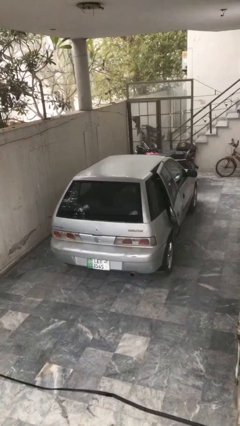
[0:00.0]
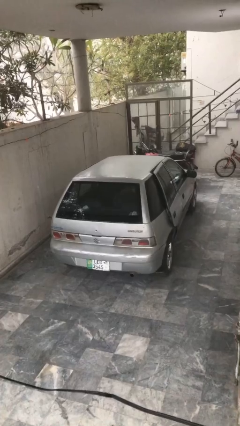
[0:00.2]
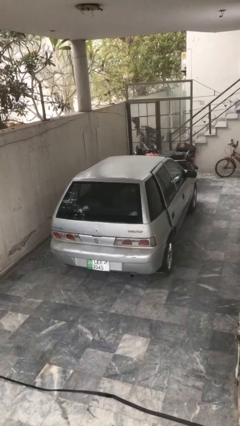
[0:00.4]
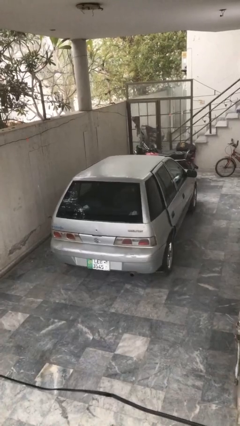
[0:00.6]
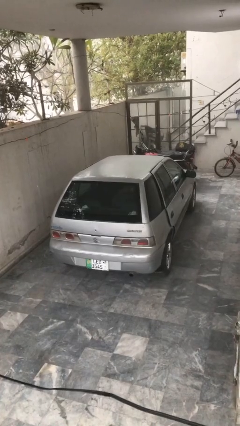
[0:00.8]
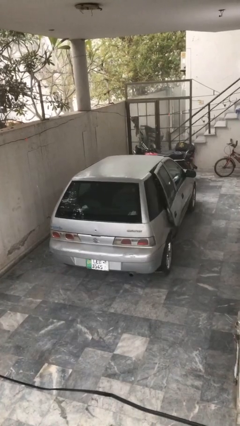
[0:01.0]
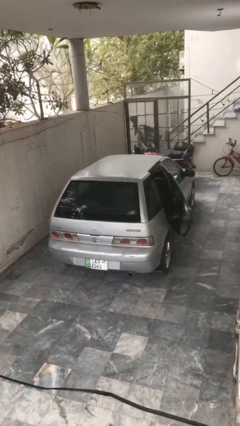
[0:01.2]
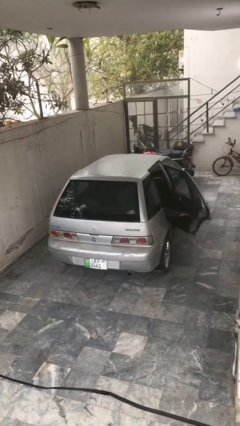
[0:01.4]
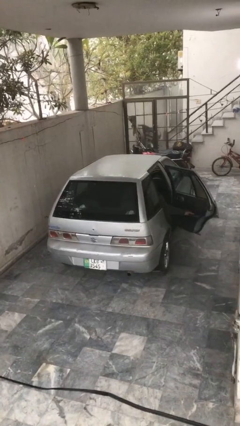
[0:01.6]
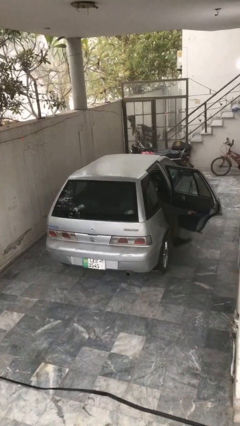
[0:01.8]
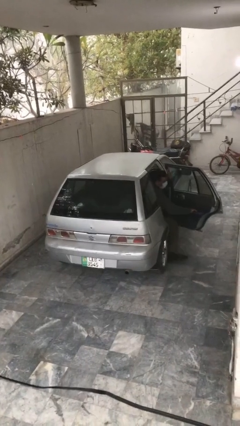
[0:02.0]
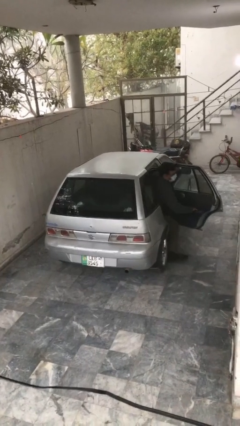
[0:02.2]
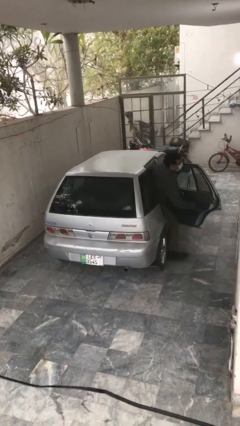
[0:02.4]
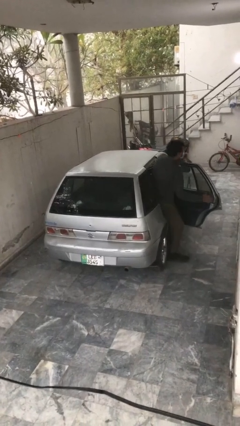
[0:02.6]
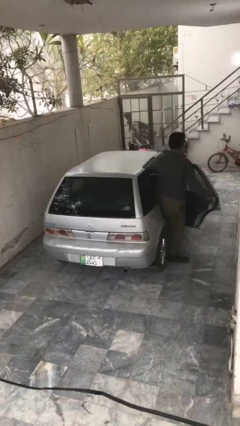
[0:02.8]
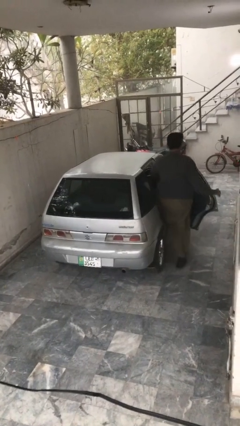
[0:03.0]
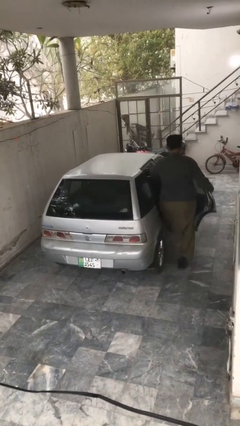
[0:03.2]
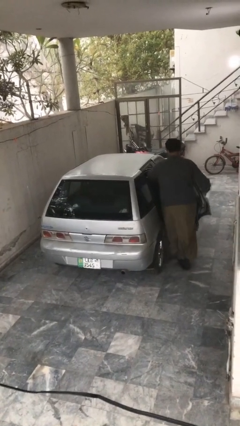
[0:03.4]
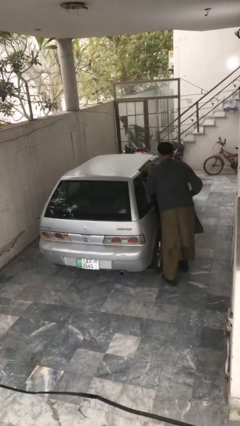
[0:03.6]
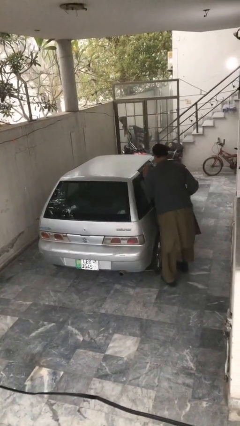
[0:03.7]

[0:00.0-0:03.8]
car drops off person

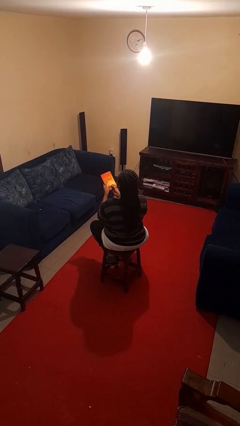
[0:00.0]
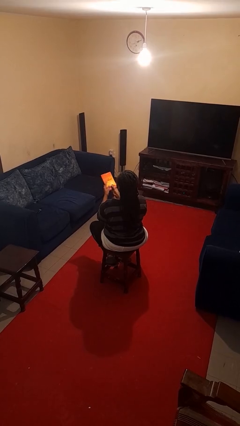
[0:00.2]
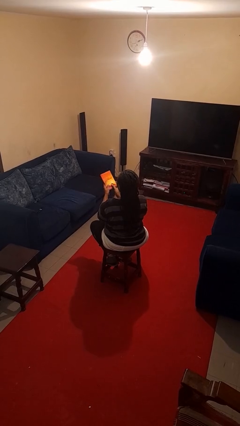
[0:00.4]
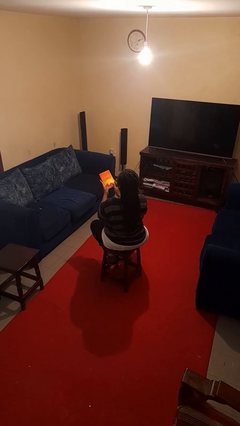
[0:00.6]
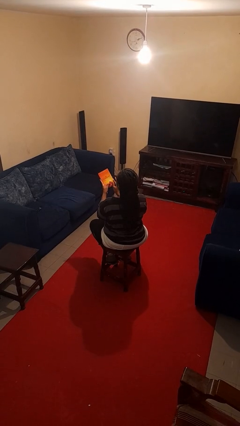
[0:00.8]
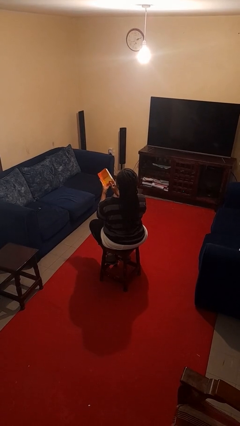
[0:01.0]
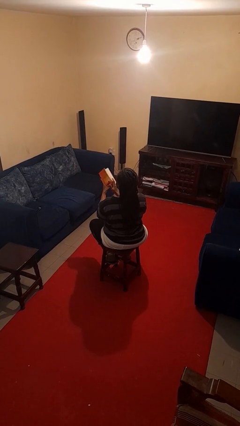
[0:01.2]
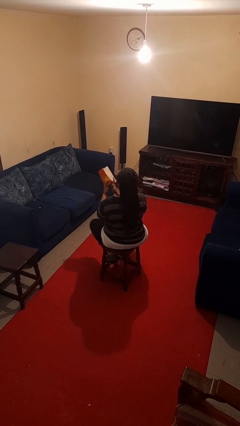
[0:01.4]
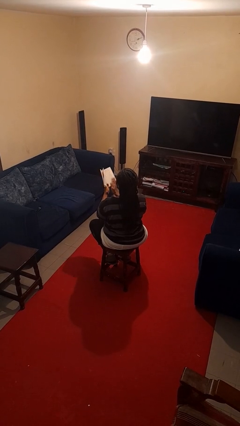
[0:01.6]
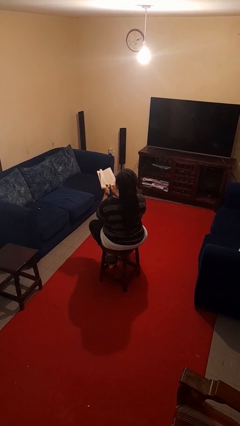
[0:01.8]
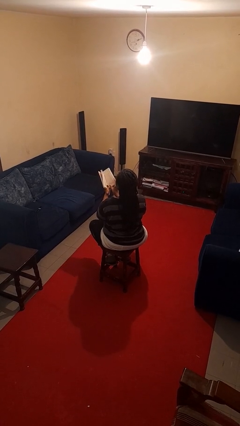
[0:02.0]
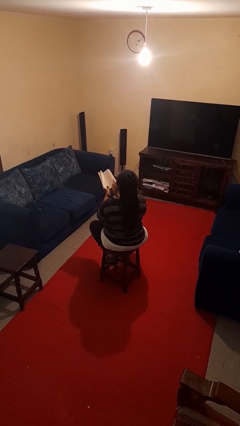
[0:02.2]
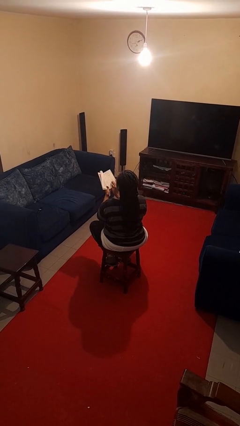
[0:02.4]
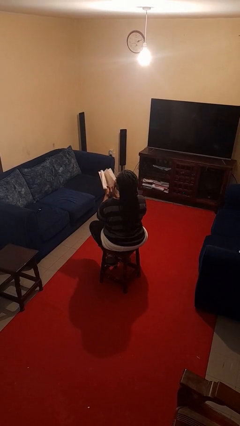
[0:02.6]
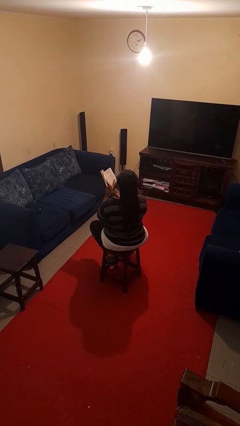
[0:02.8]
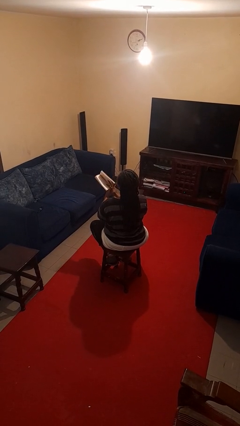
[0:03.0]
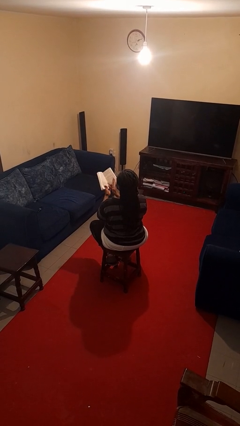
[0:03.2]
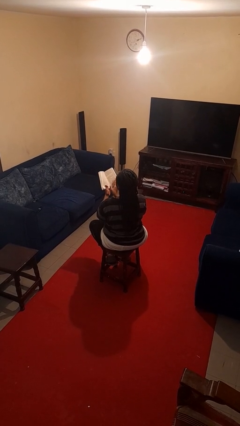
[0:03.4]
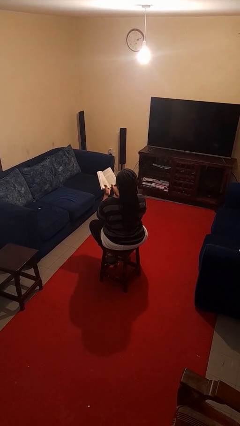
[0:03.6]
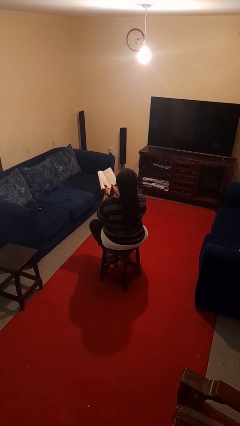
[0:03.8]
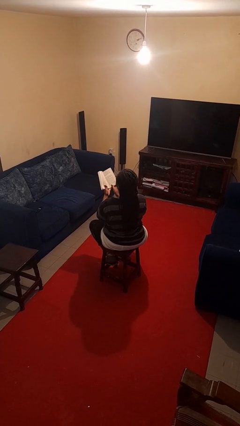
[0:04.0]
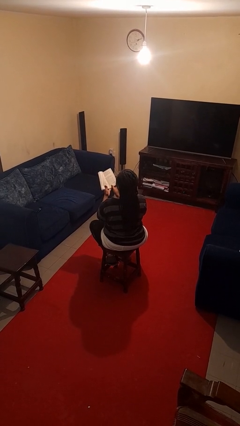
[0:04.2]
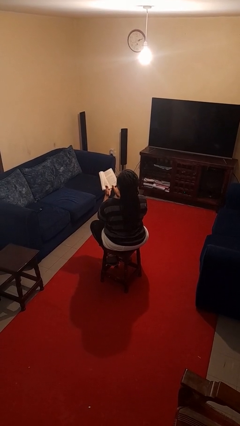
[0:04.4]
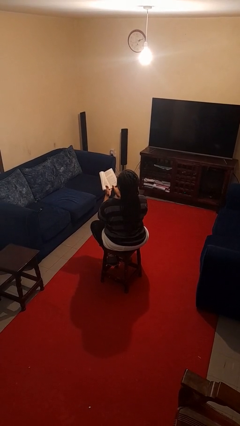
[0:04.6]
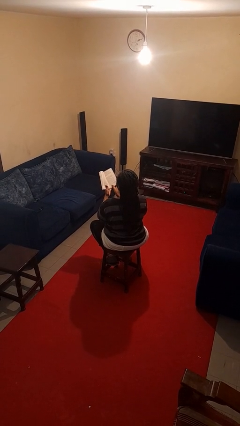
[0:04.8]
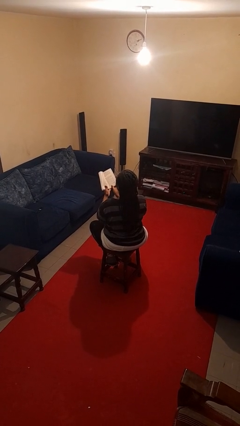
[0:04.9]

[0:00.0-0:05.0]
person reads book

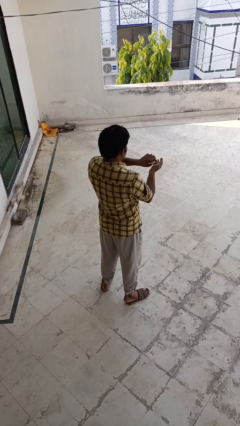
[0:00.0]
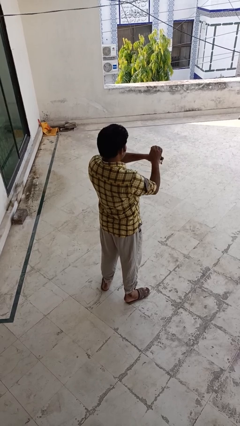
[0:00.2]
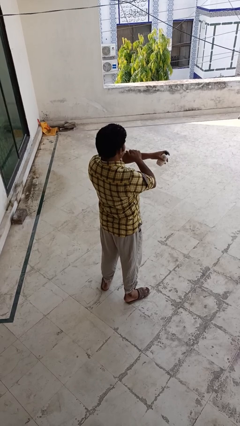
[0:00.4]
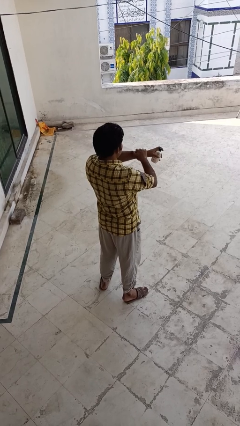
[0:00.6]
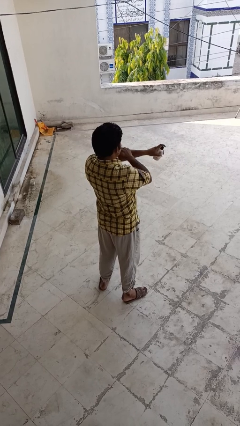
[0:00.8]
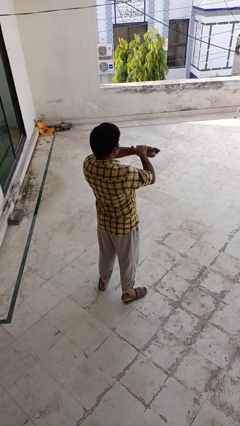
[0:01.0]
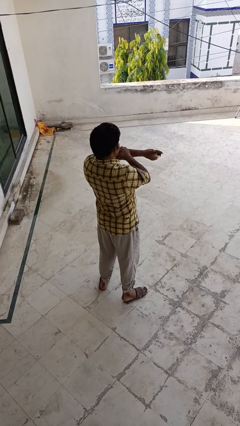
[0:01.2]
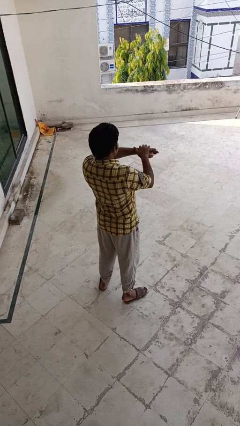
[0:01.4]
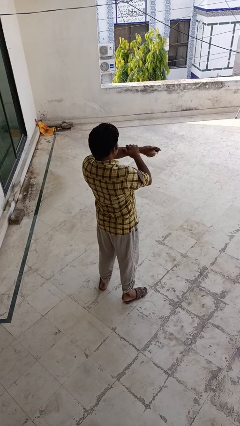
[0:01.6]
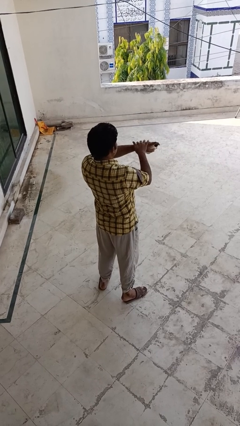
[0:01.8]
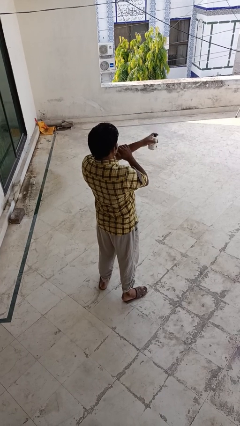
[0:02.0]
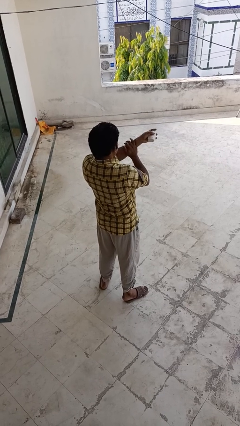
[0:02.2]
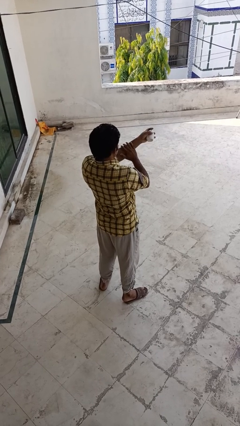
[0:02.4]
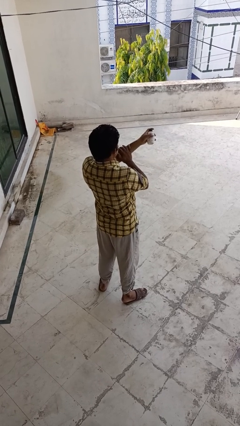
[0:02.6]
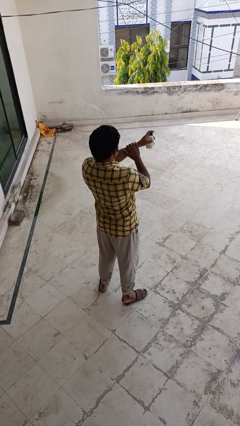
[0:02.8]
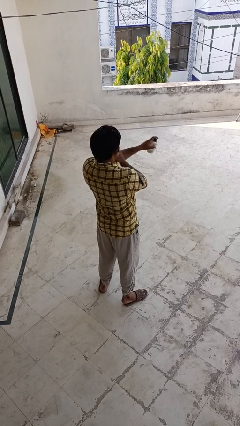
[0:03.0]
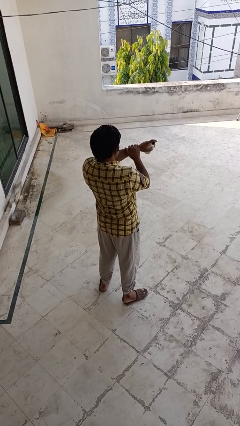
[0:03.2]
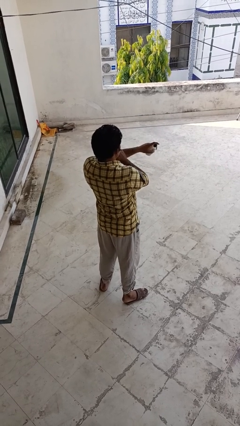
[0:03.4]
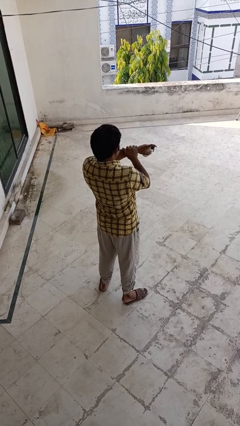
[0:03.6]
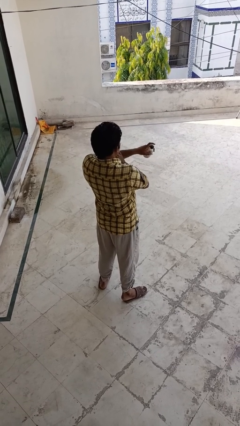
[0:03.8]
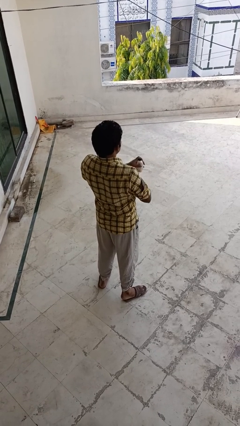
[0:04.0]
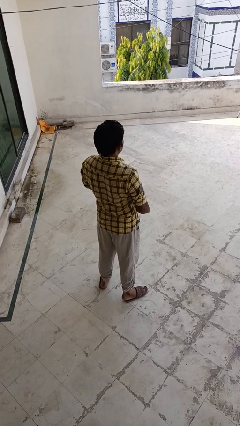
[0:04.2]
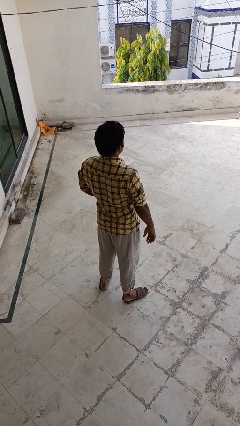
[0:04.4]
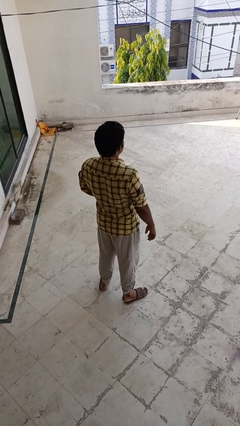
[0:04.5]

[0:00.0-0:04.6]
person applies sunscreen

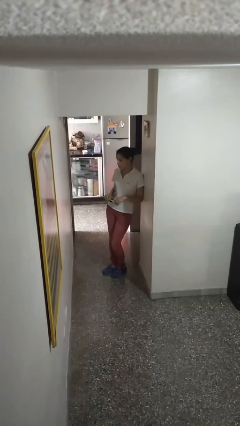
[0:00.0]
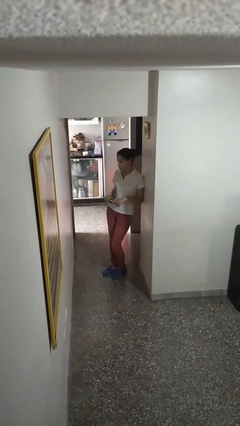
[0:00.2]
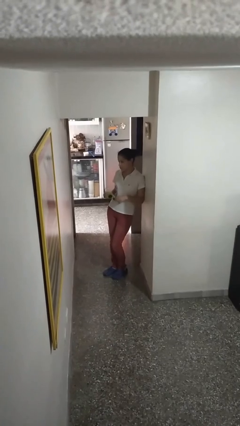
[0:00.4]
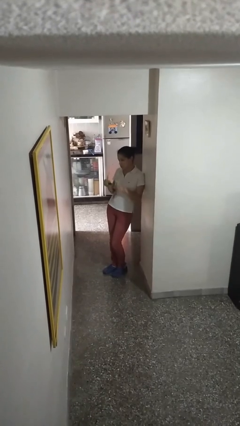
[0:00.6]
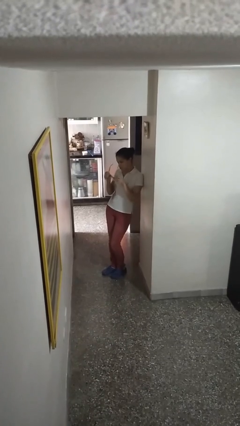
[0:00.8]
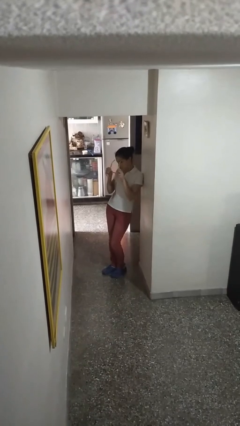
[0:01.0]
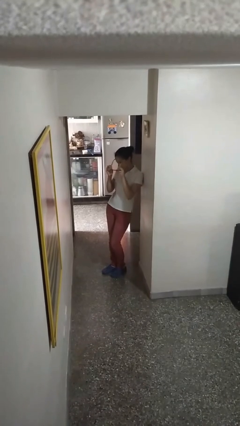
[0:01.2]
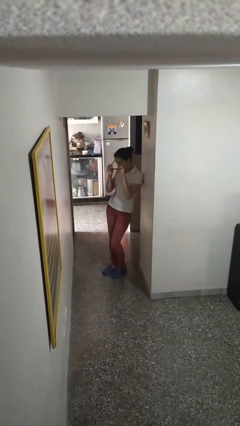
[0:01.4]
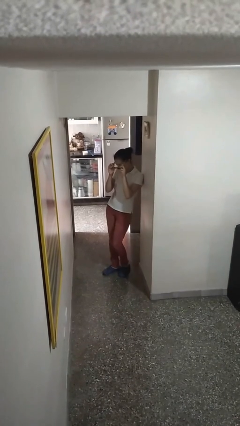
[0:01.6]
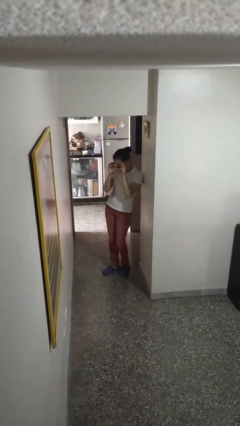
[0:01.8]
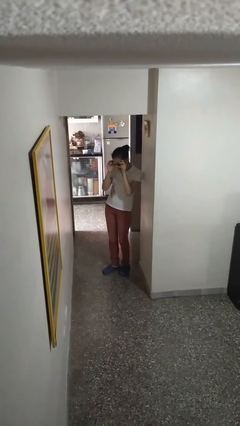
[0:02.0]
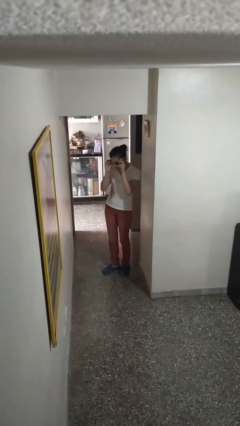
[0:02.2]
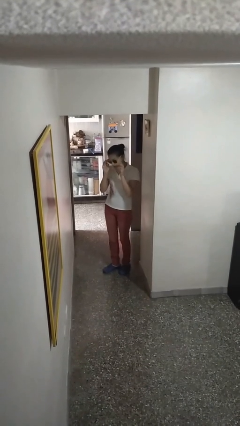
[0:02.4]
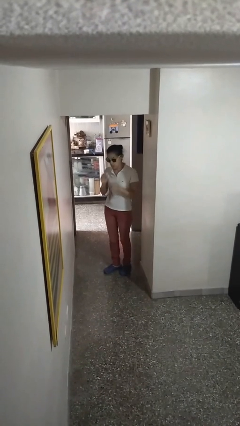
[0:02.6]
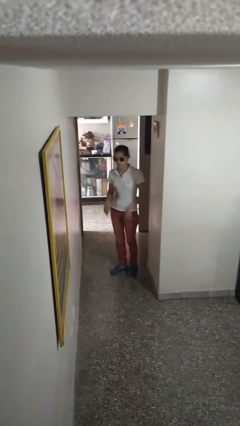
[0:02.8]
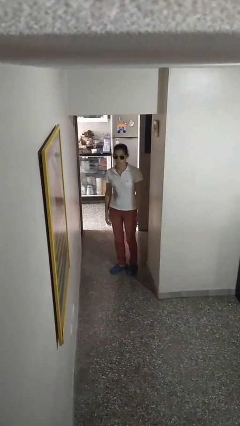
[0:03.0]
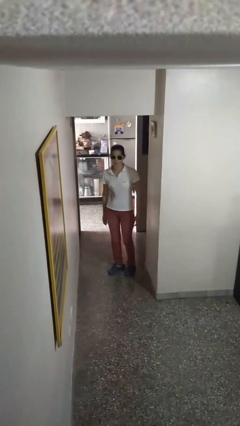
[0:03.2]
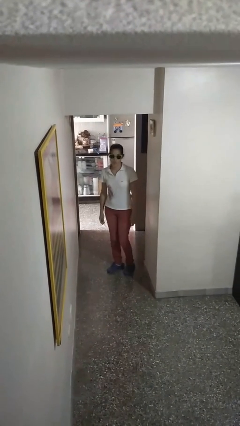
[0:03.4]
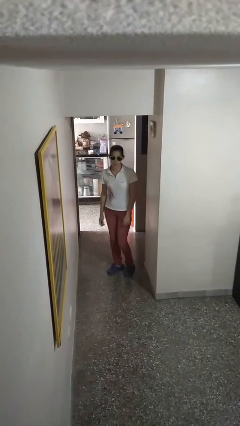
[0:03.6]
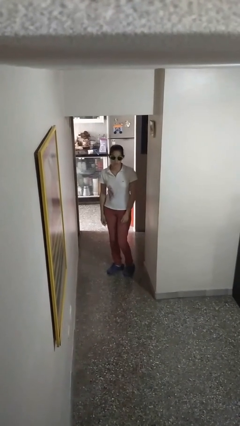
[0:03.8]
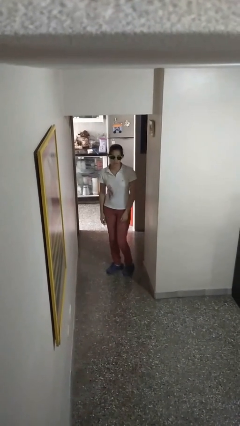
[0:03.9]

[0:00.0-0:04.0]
person puts on sunglasses

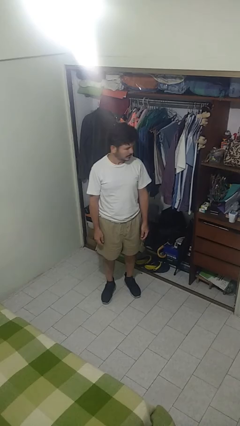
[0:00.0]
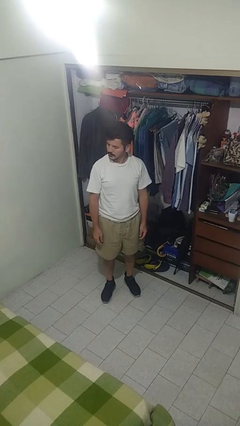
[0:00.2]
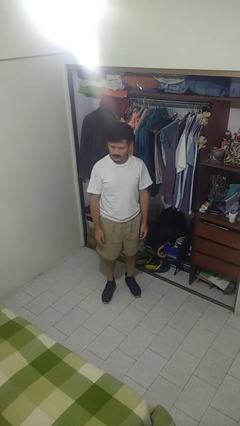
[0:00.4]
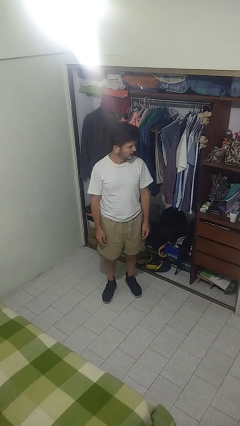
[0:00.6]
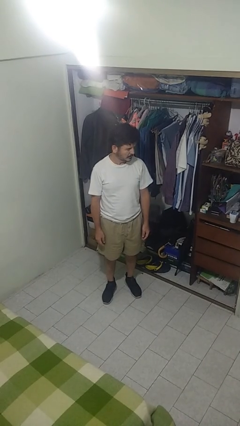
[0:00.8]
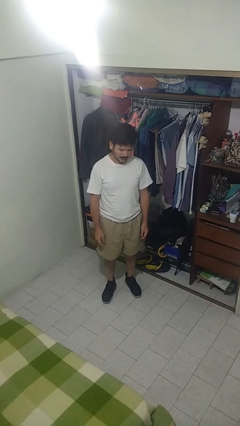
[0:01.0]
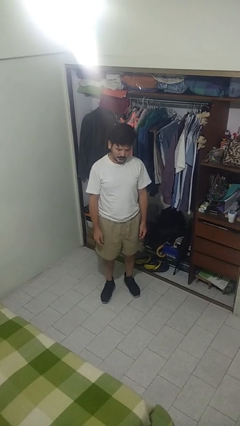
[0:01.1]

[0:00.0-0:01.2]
person shakes head
